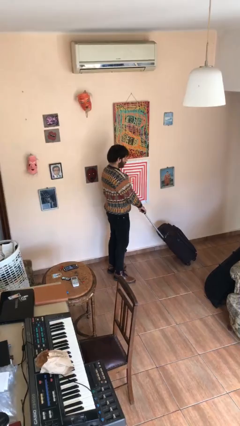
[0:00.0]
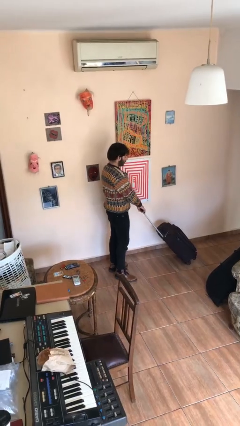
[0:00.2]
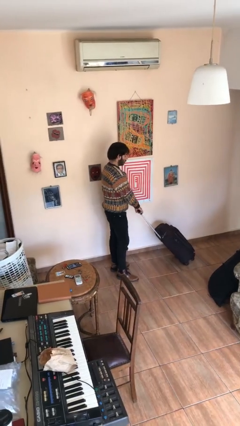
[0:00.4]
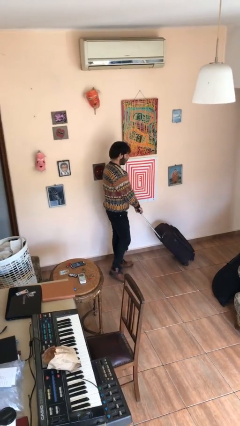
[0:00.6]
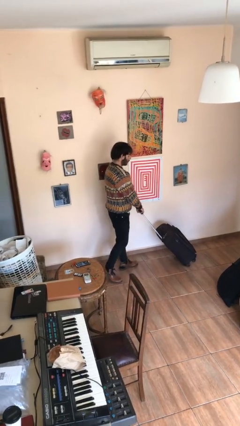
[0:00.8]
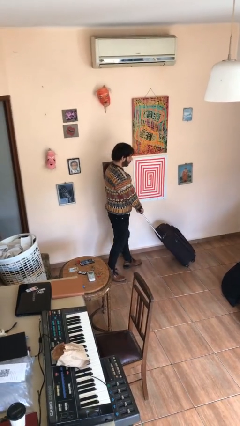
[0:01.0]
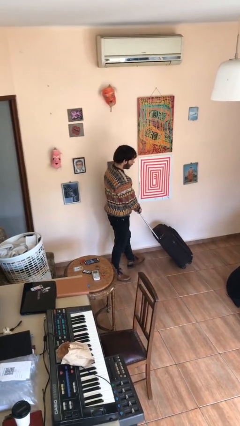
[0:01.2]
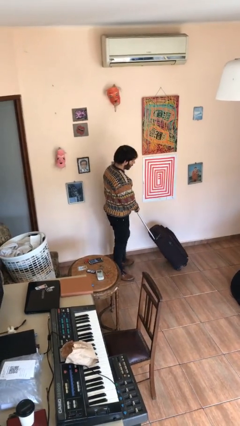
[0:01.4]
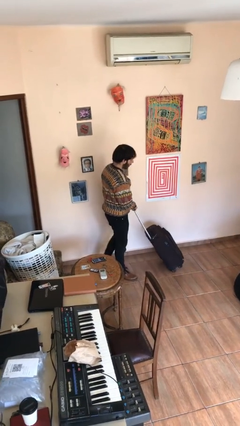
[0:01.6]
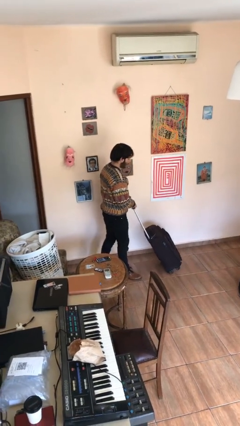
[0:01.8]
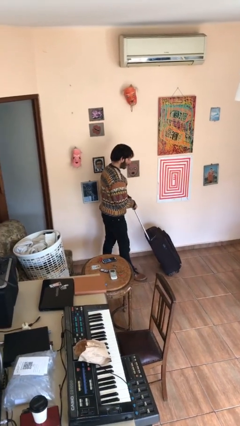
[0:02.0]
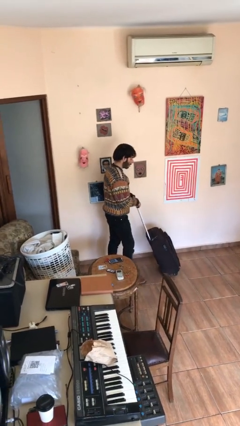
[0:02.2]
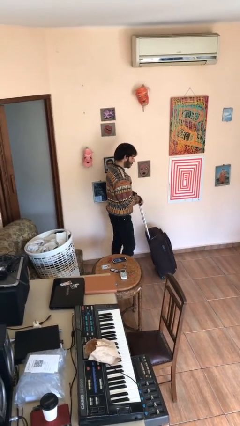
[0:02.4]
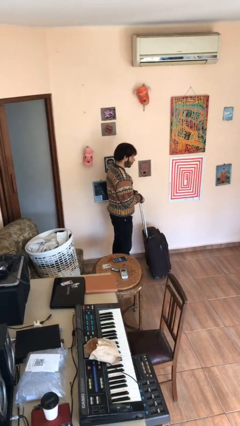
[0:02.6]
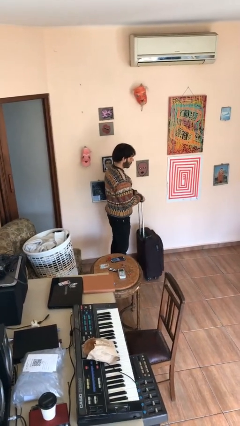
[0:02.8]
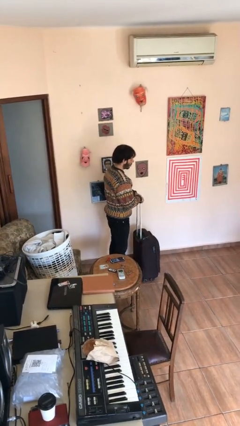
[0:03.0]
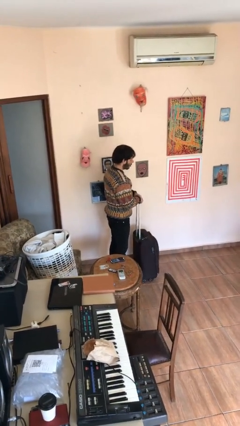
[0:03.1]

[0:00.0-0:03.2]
person pulls wheeled cart

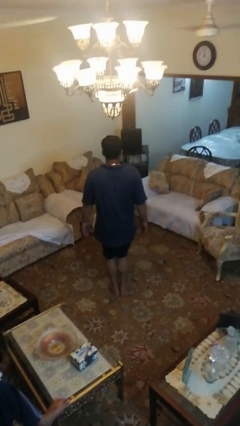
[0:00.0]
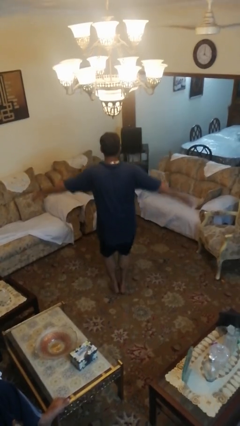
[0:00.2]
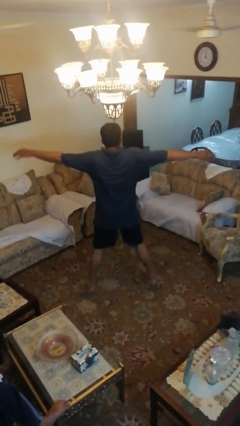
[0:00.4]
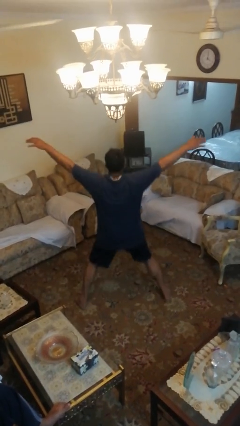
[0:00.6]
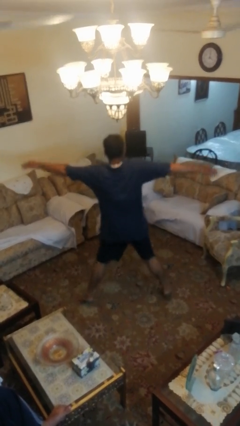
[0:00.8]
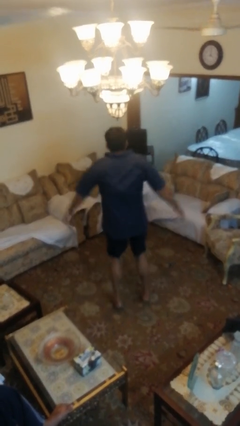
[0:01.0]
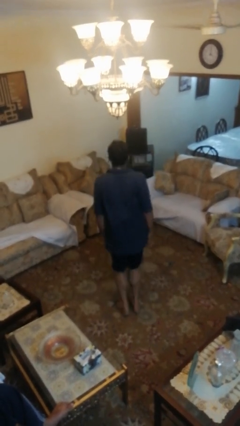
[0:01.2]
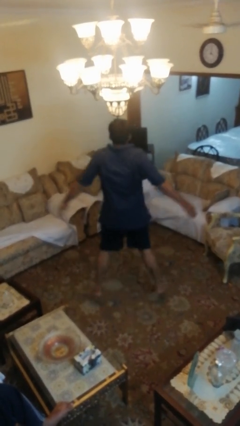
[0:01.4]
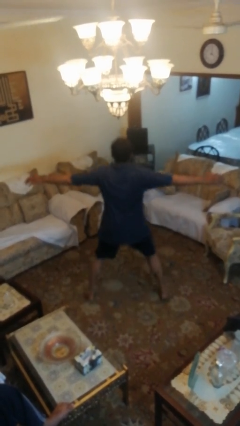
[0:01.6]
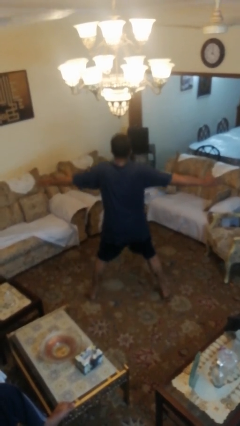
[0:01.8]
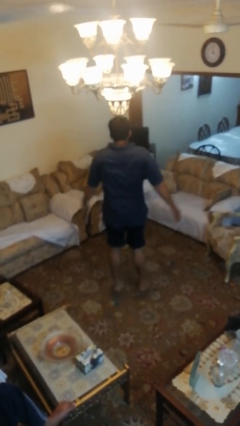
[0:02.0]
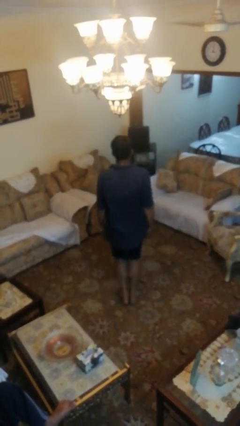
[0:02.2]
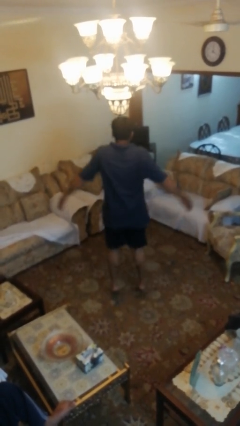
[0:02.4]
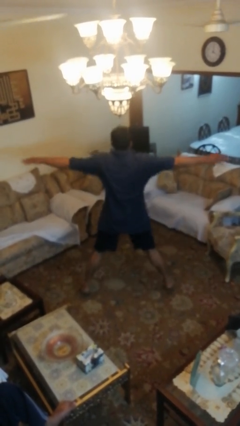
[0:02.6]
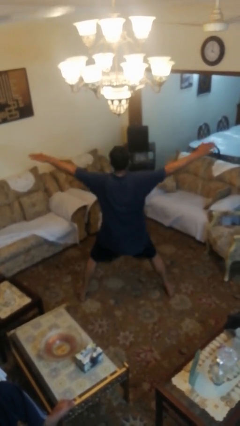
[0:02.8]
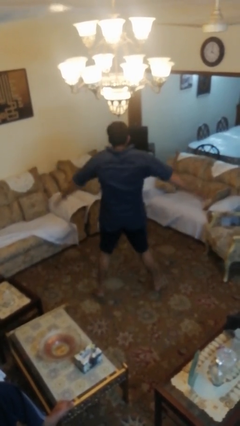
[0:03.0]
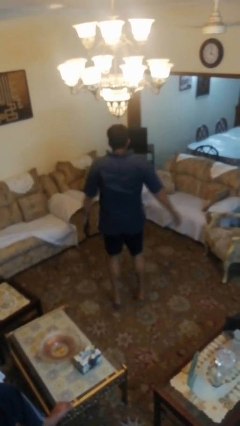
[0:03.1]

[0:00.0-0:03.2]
person exercises with jumping jacks

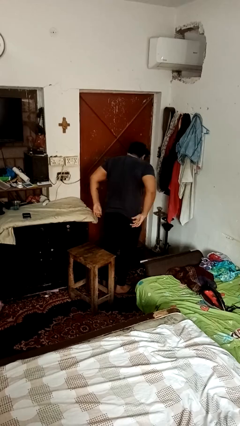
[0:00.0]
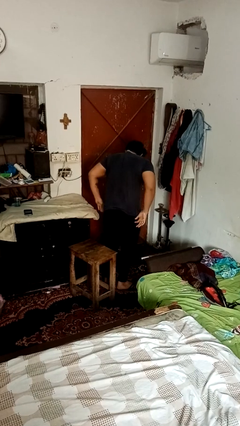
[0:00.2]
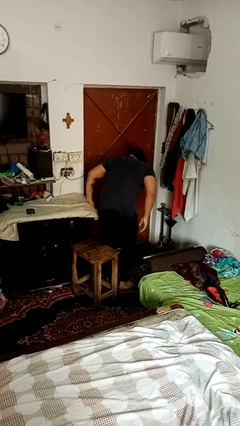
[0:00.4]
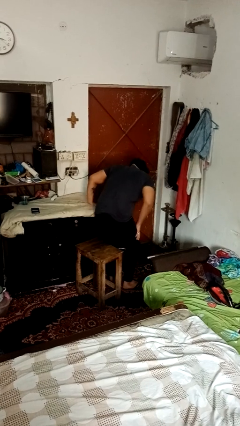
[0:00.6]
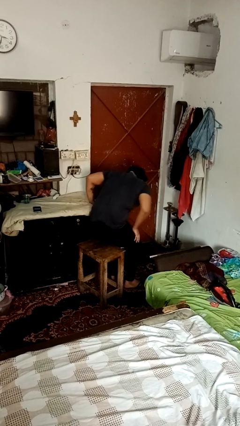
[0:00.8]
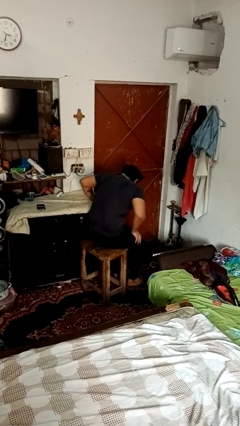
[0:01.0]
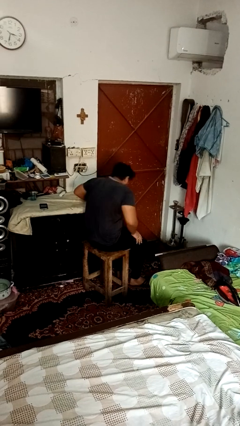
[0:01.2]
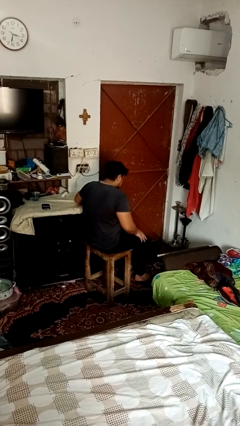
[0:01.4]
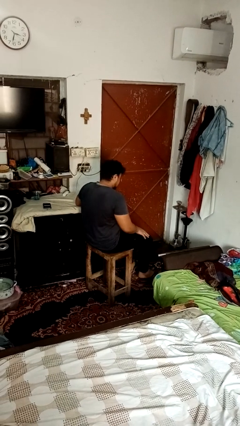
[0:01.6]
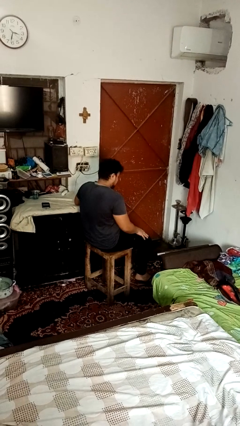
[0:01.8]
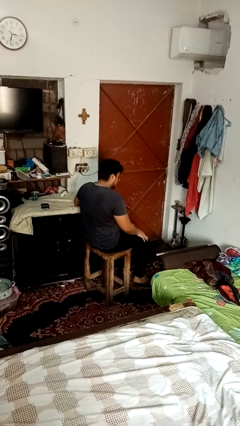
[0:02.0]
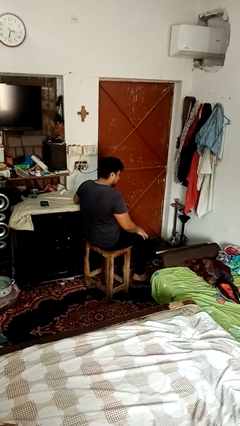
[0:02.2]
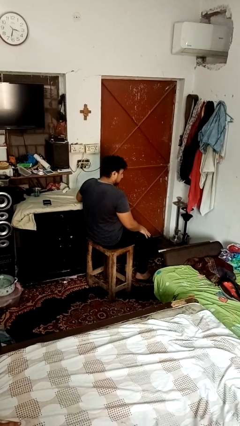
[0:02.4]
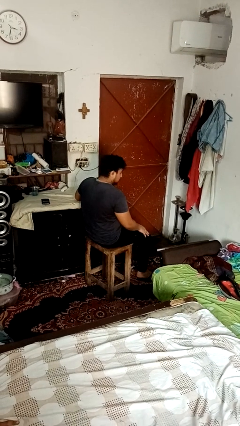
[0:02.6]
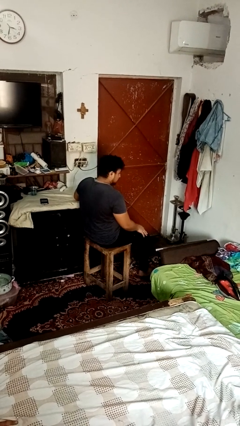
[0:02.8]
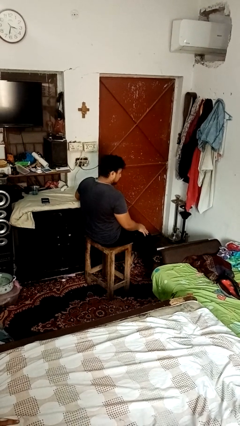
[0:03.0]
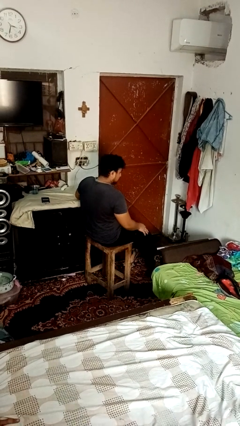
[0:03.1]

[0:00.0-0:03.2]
person sits down

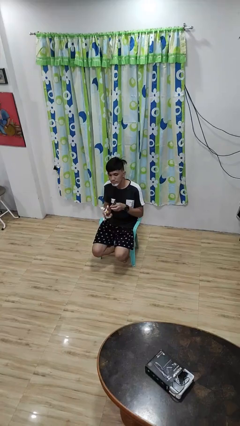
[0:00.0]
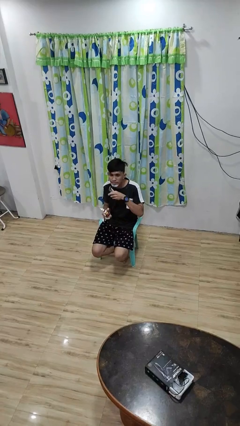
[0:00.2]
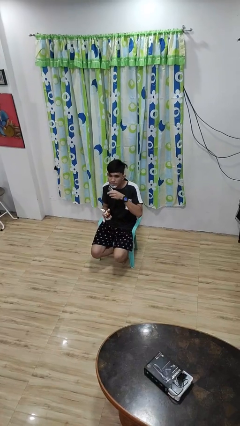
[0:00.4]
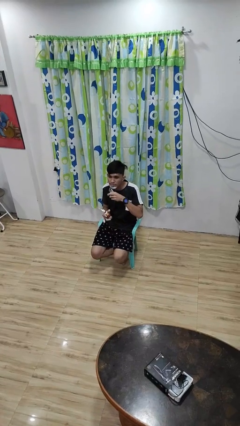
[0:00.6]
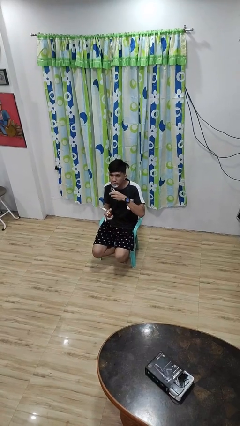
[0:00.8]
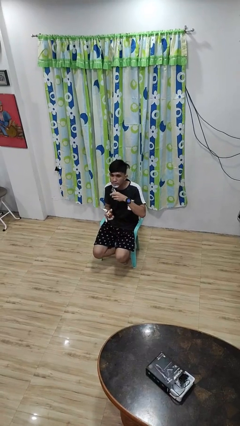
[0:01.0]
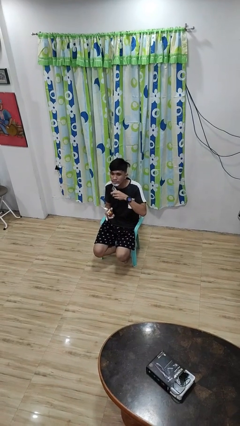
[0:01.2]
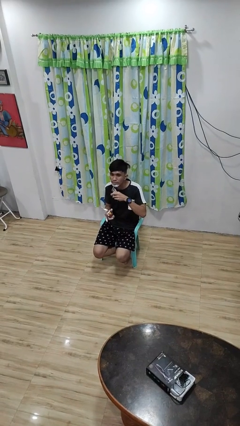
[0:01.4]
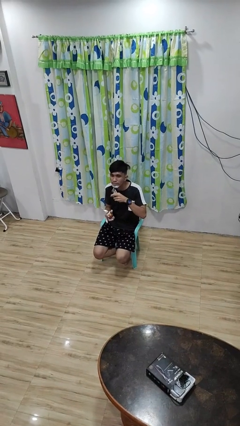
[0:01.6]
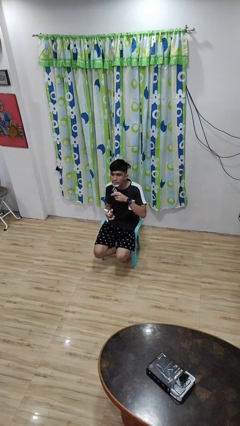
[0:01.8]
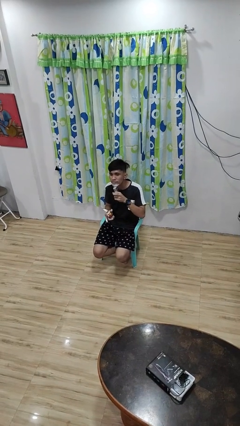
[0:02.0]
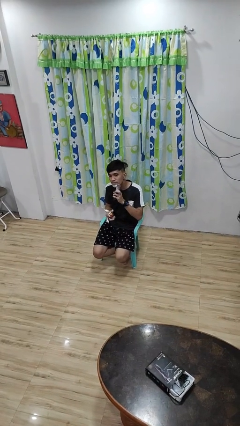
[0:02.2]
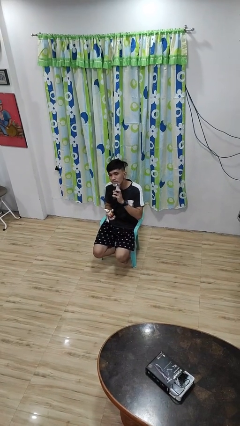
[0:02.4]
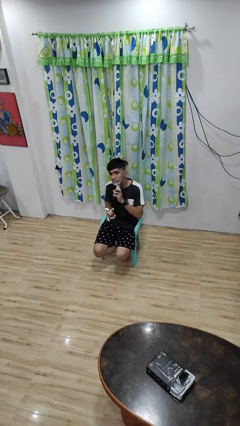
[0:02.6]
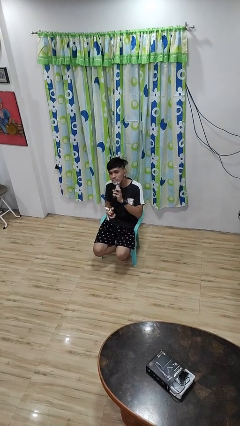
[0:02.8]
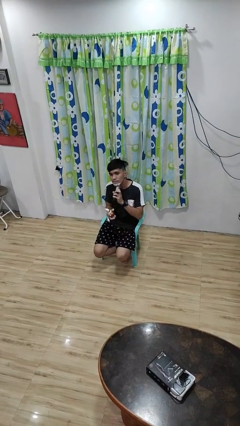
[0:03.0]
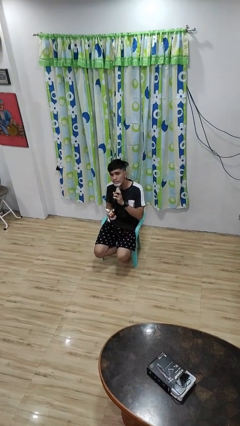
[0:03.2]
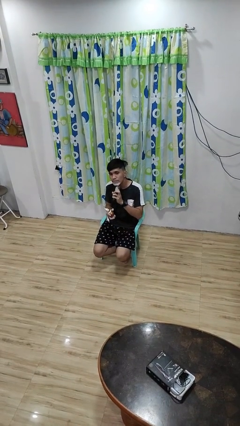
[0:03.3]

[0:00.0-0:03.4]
person shaves face

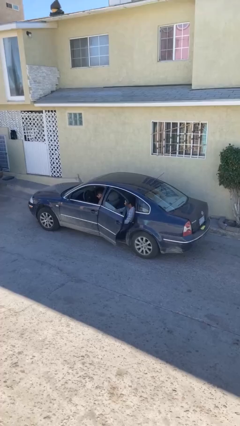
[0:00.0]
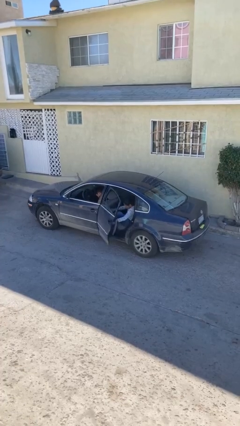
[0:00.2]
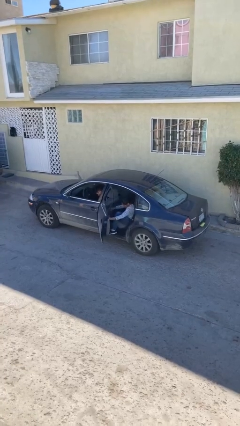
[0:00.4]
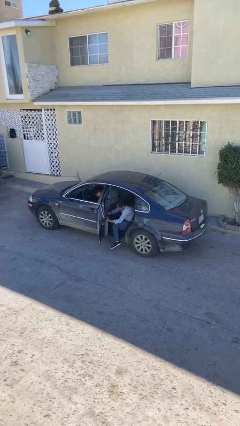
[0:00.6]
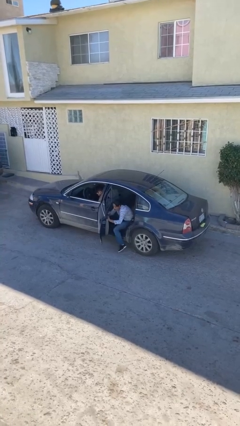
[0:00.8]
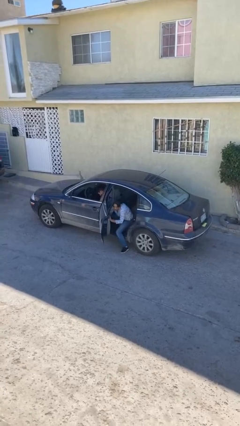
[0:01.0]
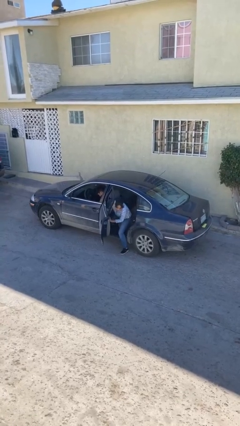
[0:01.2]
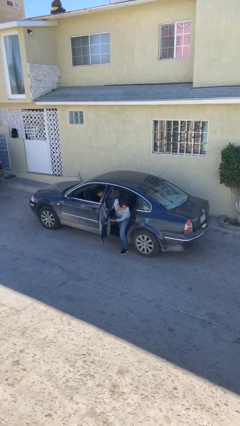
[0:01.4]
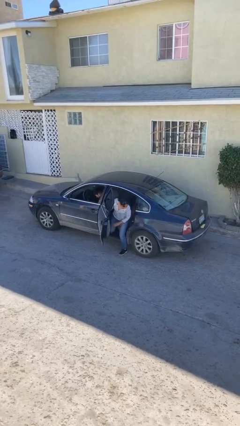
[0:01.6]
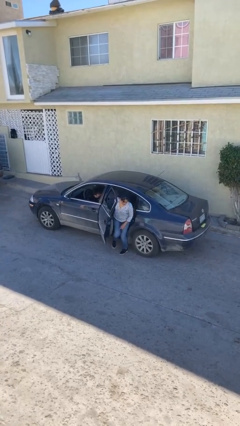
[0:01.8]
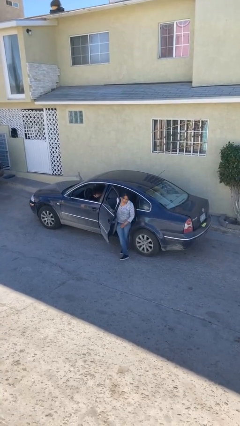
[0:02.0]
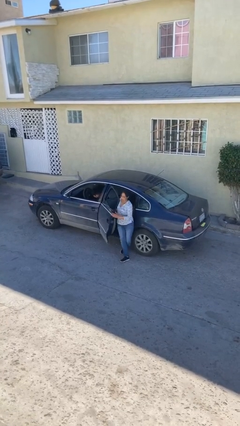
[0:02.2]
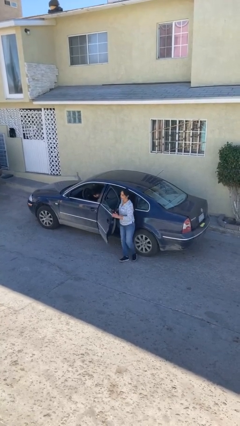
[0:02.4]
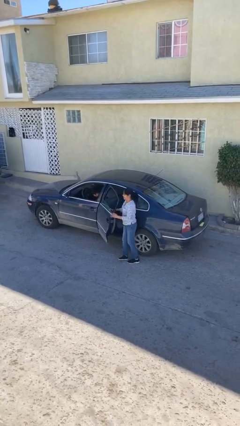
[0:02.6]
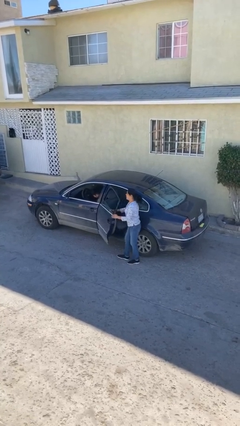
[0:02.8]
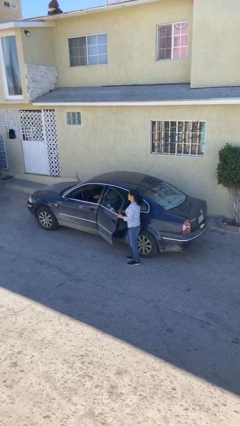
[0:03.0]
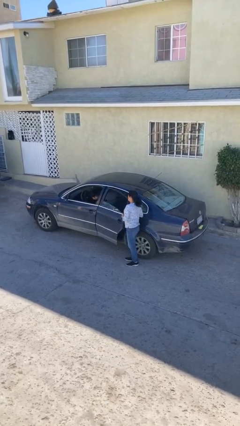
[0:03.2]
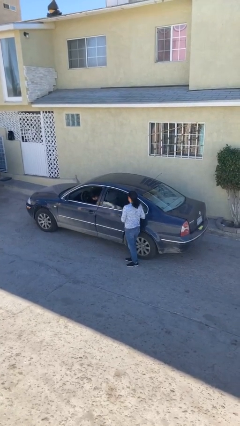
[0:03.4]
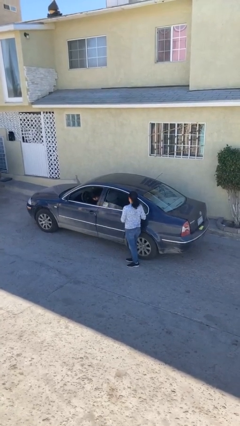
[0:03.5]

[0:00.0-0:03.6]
car drops off person

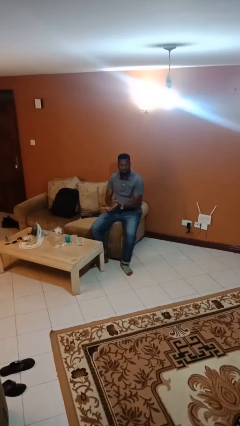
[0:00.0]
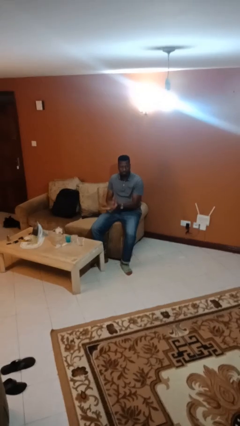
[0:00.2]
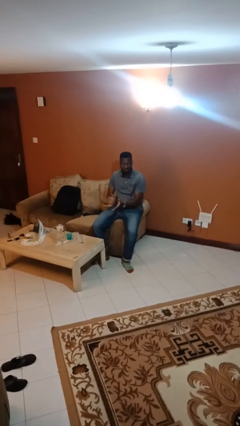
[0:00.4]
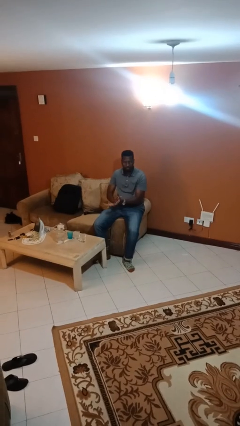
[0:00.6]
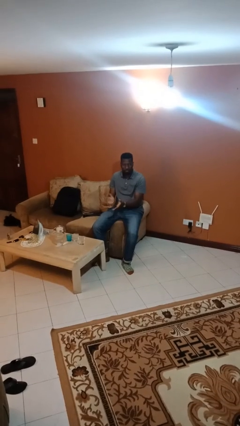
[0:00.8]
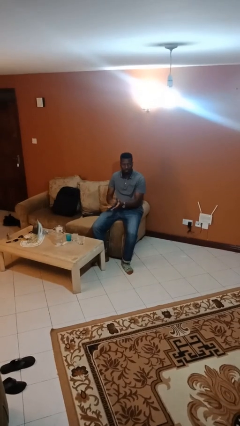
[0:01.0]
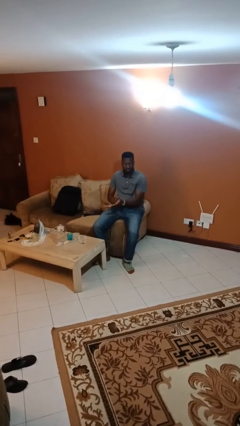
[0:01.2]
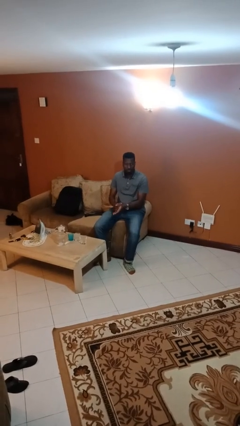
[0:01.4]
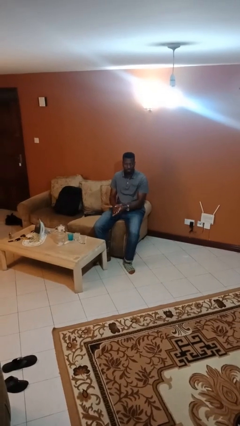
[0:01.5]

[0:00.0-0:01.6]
person claps hands
